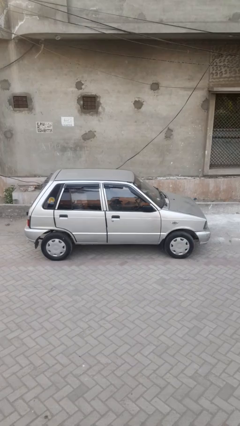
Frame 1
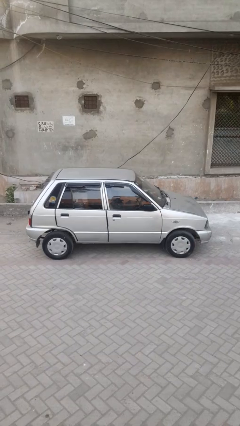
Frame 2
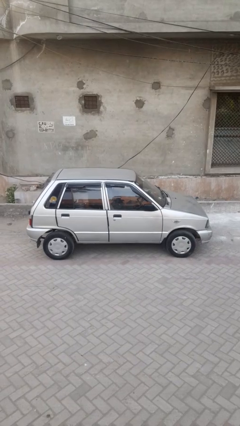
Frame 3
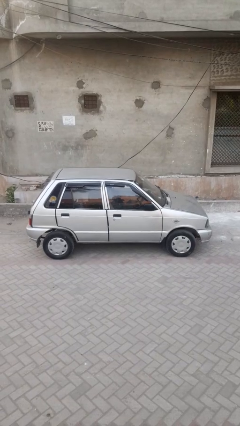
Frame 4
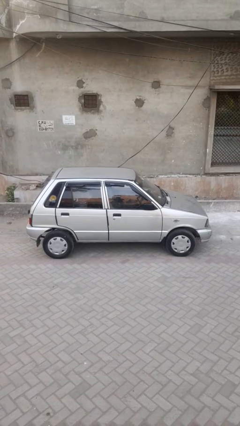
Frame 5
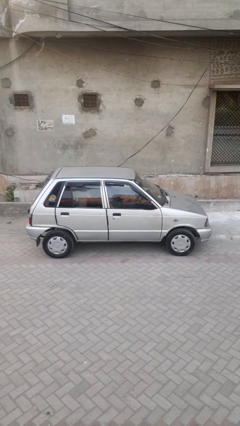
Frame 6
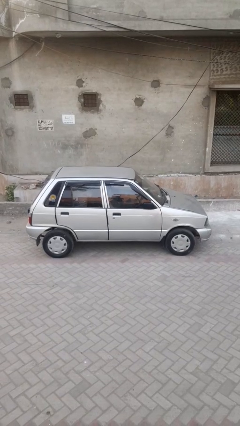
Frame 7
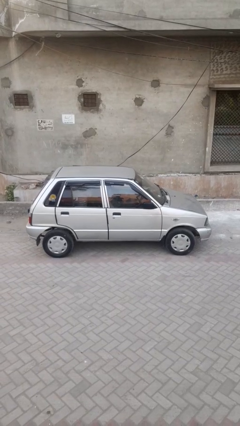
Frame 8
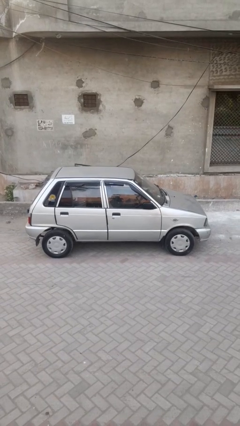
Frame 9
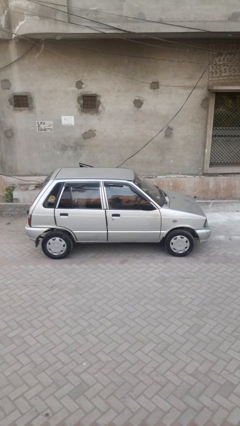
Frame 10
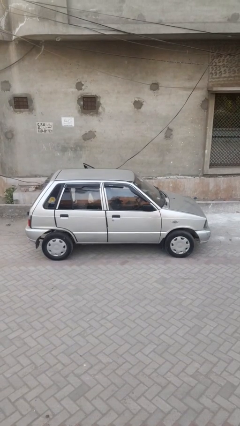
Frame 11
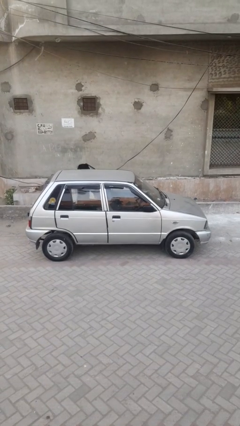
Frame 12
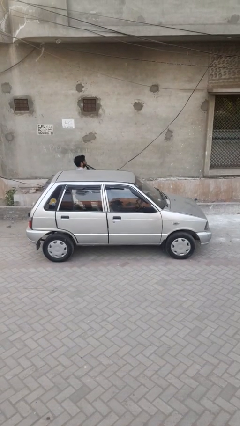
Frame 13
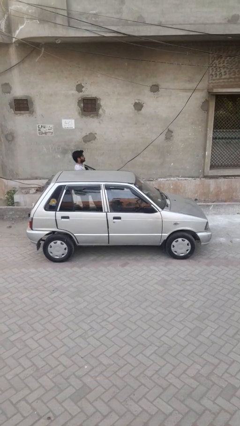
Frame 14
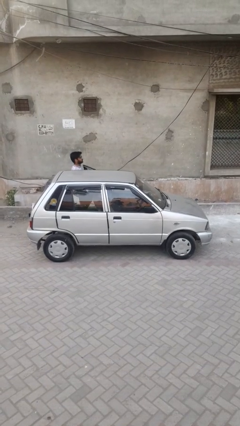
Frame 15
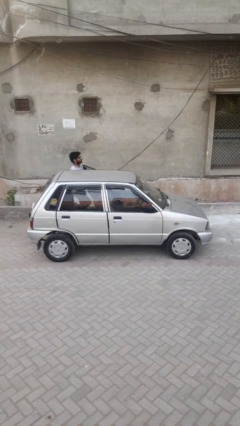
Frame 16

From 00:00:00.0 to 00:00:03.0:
car drops off person

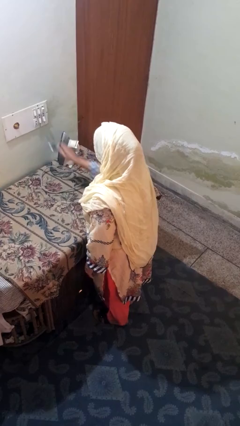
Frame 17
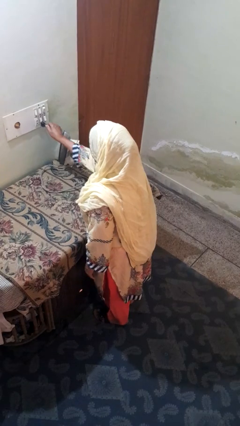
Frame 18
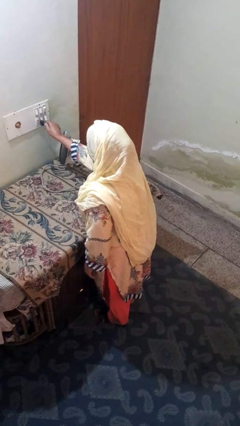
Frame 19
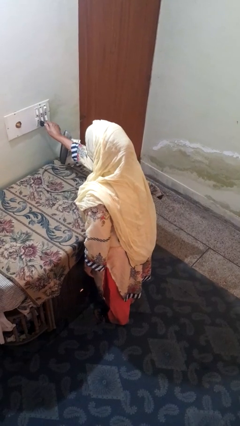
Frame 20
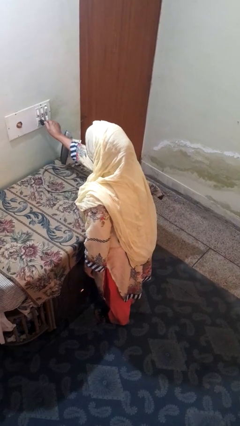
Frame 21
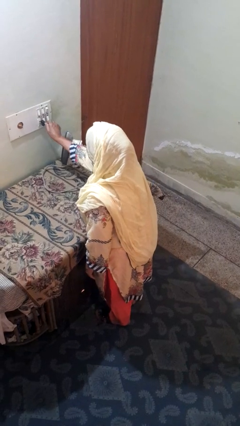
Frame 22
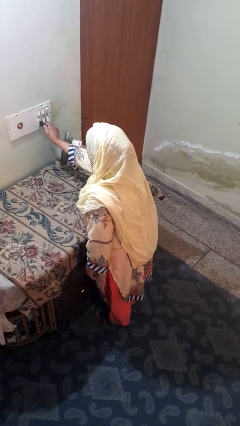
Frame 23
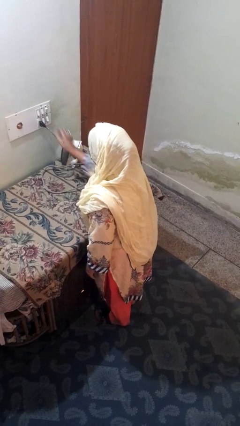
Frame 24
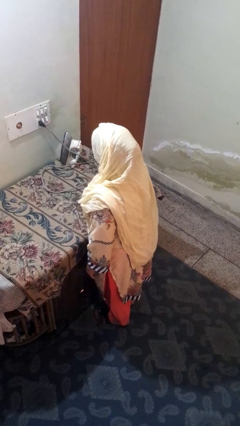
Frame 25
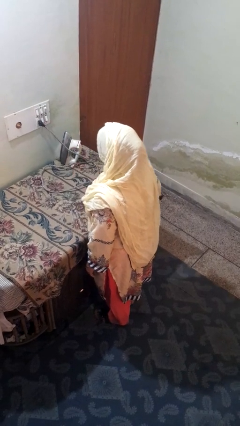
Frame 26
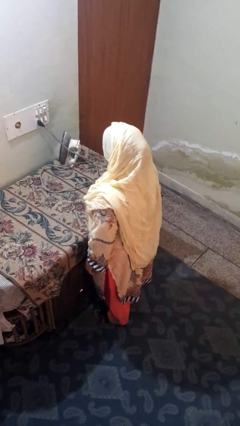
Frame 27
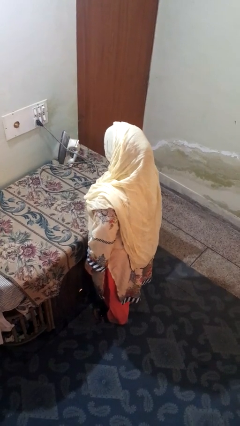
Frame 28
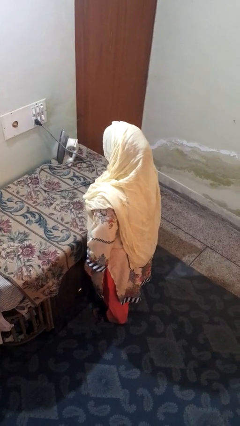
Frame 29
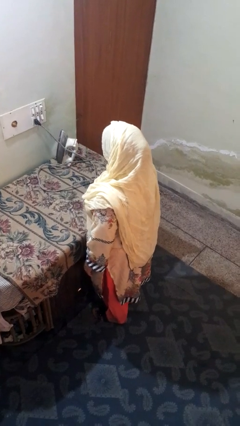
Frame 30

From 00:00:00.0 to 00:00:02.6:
person plugs into electrical socket

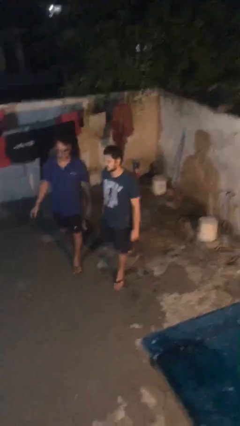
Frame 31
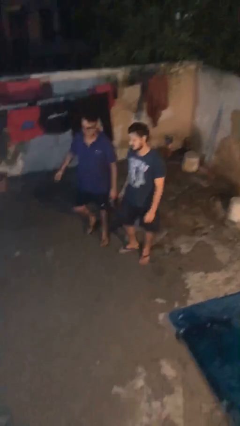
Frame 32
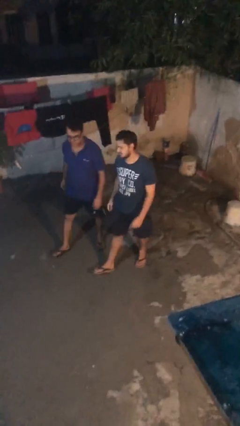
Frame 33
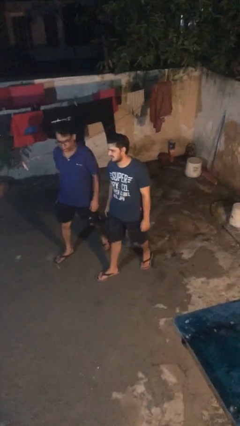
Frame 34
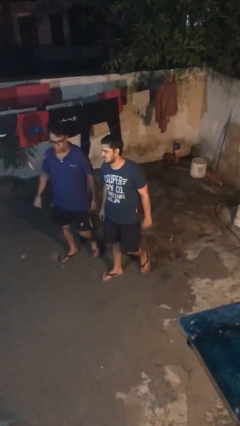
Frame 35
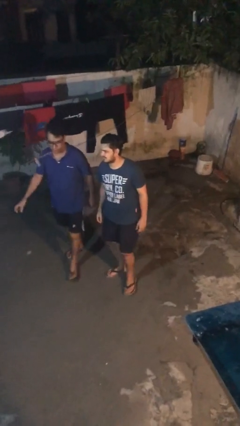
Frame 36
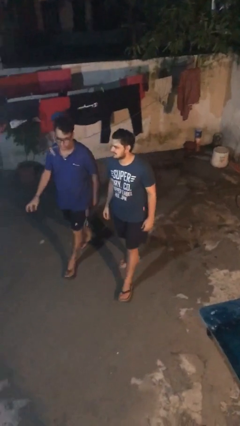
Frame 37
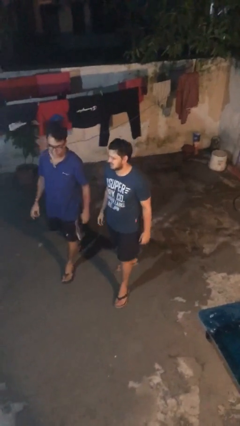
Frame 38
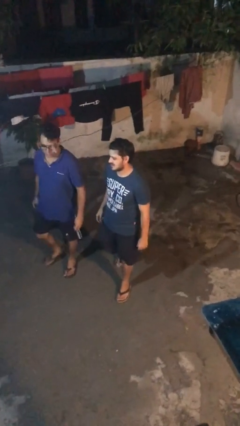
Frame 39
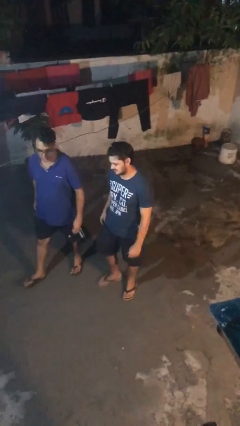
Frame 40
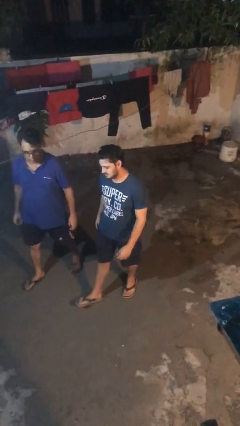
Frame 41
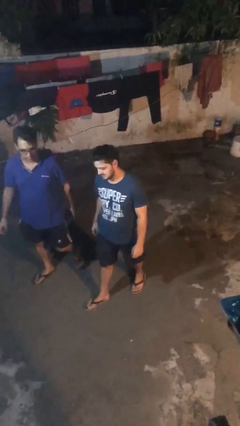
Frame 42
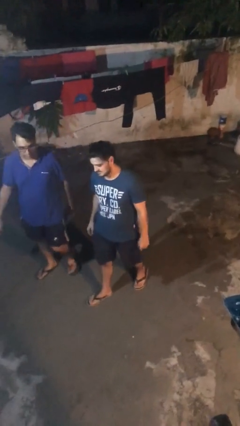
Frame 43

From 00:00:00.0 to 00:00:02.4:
person talks to person

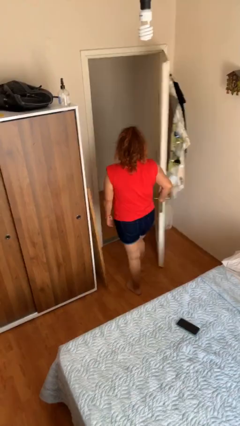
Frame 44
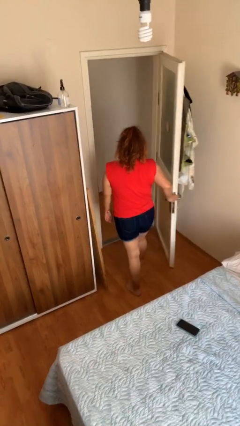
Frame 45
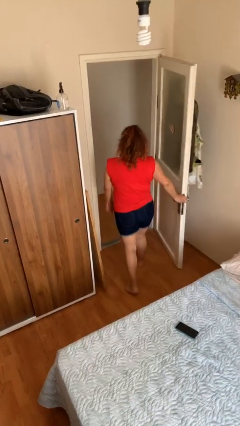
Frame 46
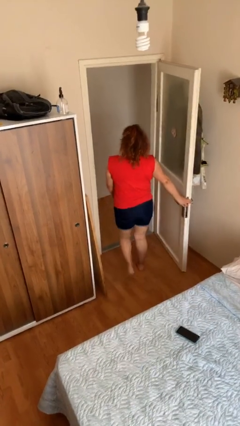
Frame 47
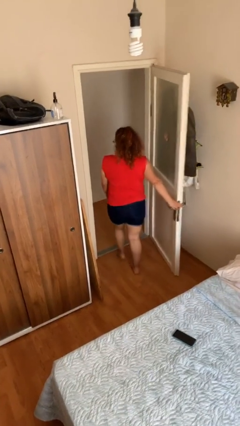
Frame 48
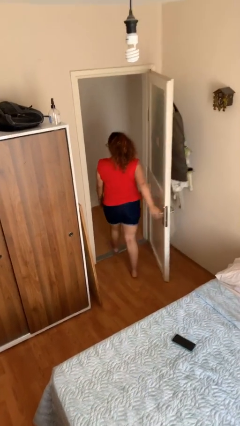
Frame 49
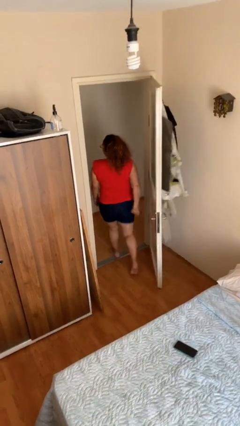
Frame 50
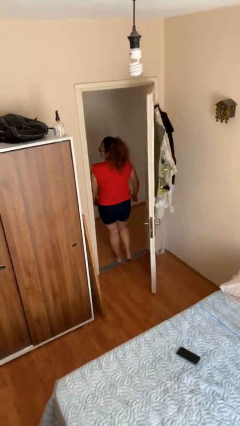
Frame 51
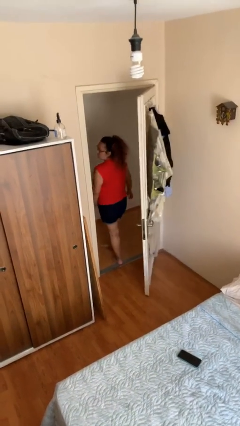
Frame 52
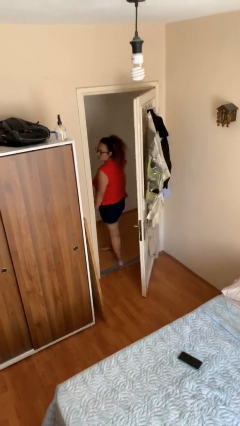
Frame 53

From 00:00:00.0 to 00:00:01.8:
person exits scene through structure

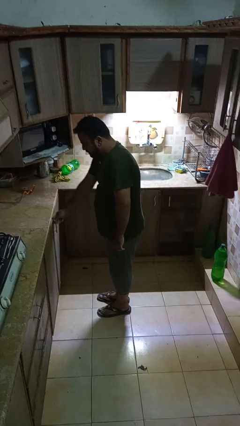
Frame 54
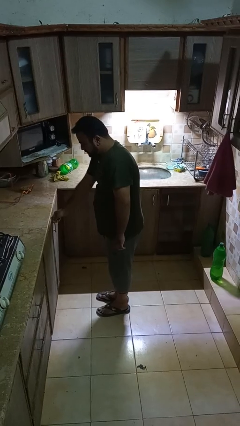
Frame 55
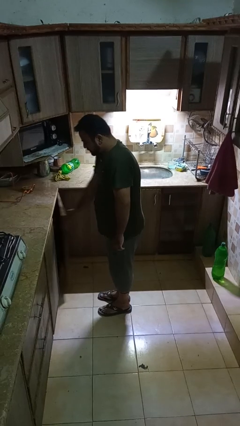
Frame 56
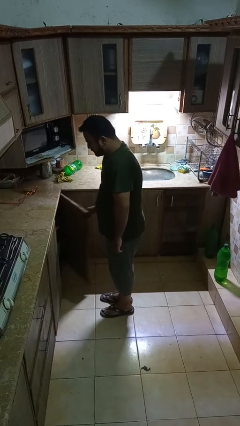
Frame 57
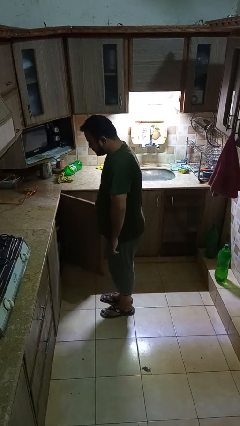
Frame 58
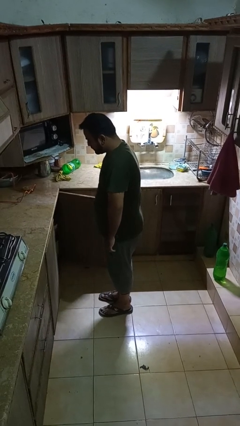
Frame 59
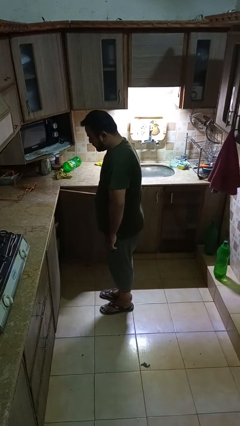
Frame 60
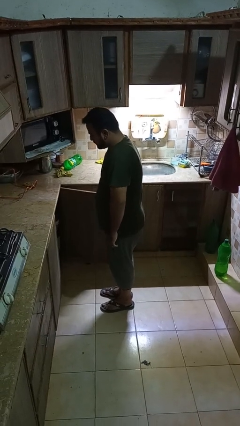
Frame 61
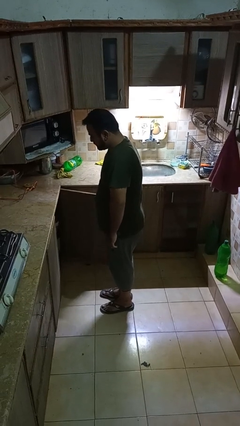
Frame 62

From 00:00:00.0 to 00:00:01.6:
person opens cabinet

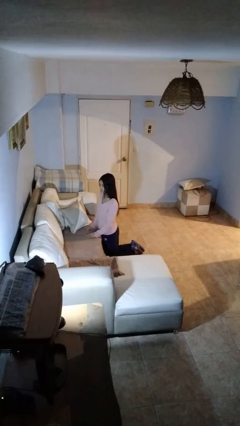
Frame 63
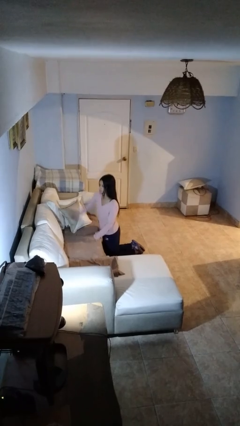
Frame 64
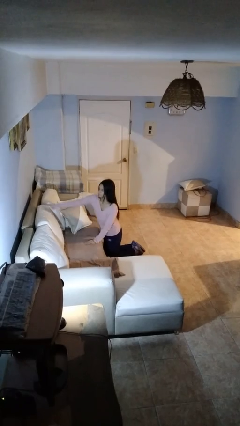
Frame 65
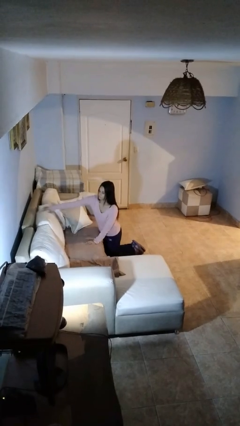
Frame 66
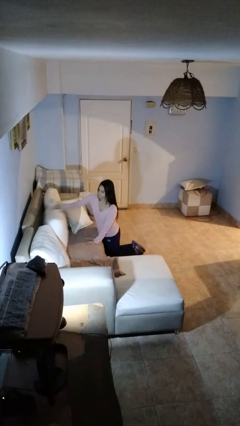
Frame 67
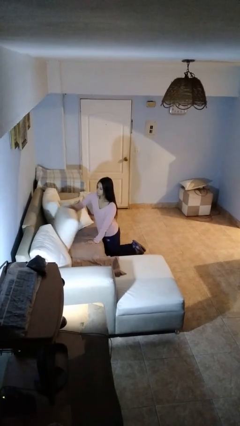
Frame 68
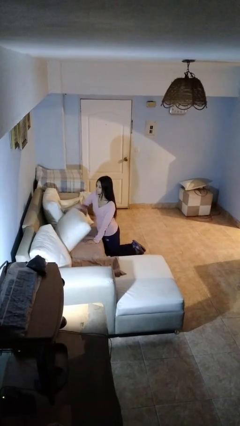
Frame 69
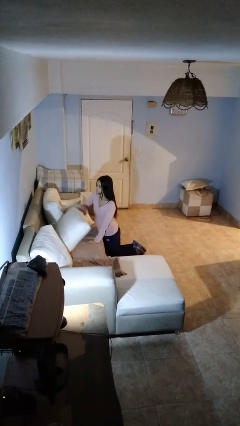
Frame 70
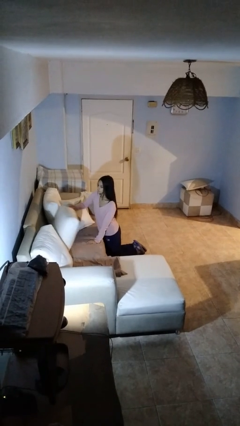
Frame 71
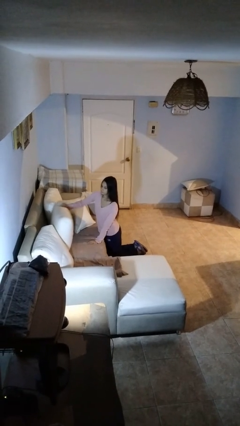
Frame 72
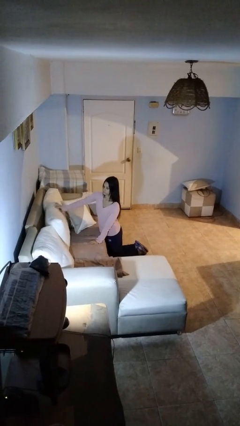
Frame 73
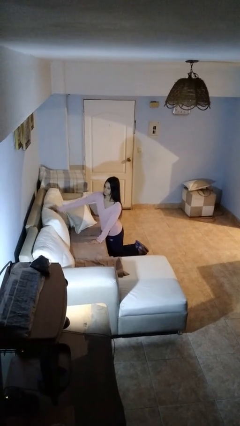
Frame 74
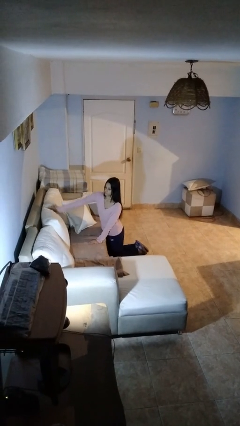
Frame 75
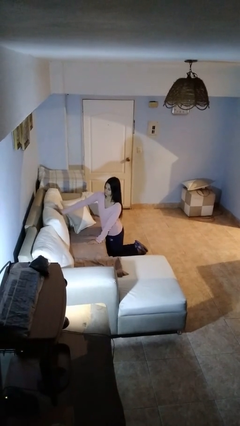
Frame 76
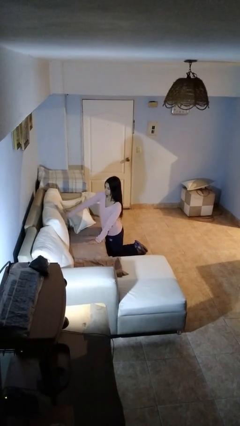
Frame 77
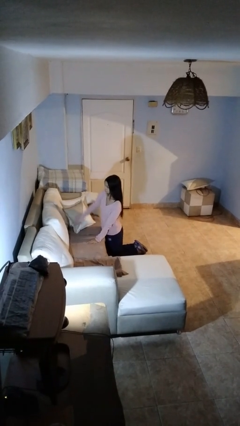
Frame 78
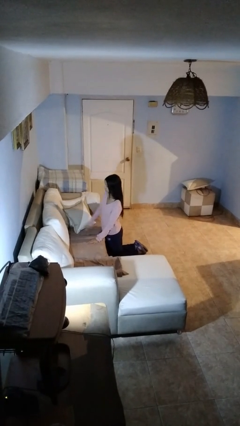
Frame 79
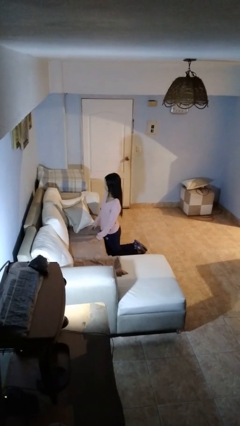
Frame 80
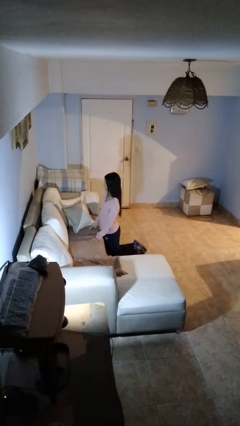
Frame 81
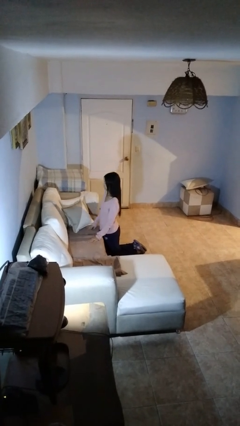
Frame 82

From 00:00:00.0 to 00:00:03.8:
person searches in couch

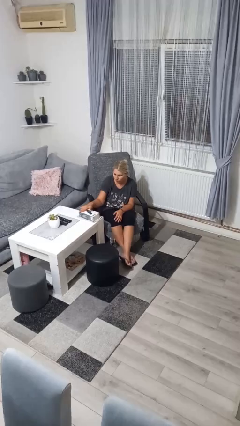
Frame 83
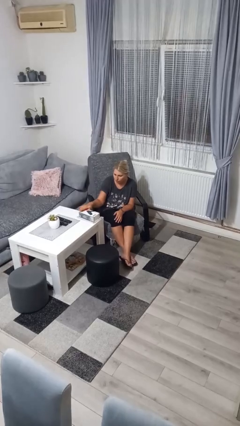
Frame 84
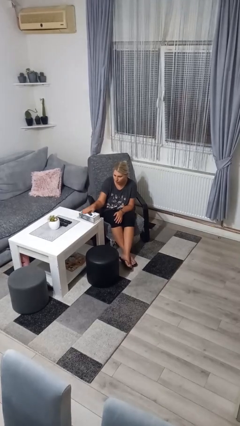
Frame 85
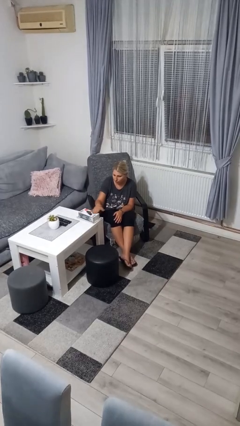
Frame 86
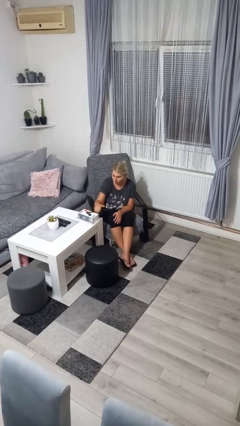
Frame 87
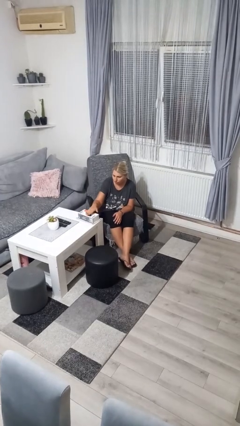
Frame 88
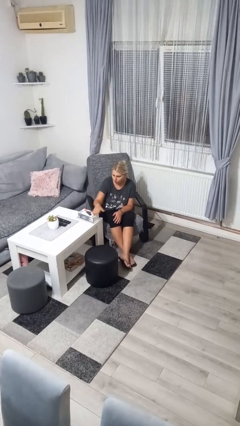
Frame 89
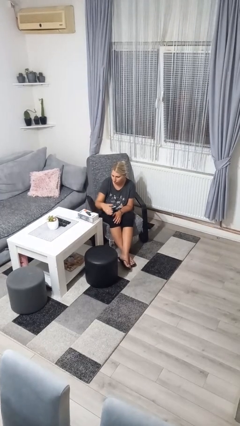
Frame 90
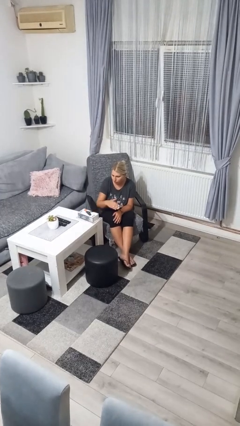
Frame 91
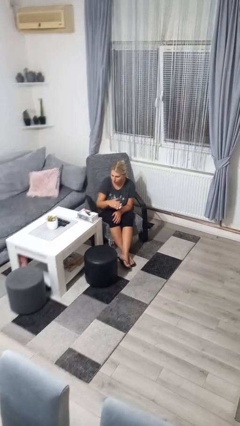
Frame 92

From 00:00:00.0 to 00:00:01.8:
person waves hand over object
